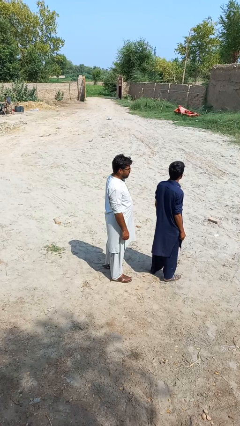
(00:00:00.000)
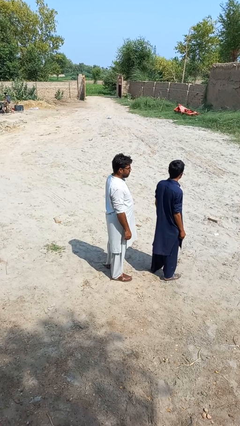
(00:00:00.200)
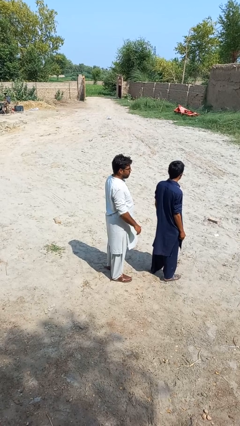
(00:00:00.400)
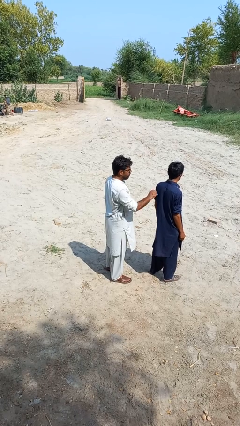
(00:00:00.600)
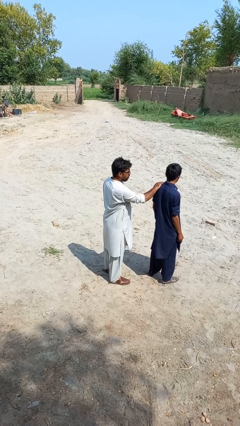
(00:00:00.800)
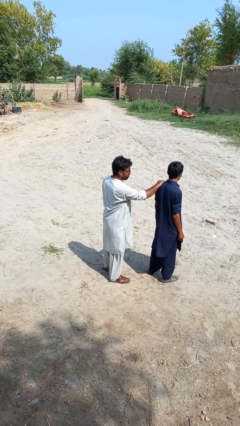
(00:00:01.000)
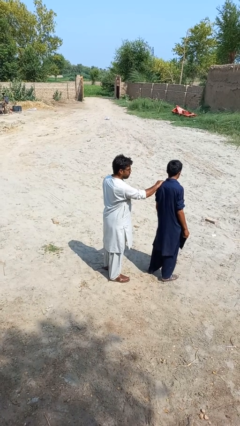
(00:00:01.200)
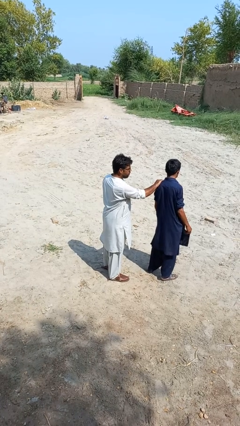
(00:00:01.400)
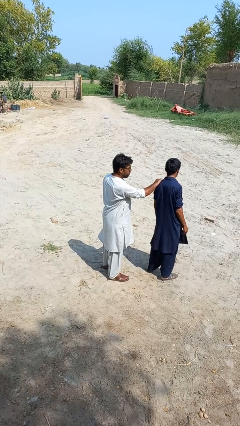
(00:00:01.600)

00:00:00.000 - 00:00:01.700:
person grabs person by shoulder

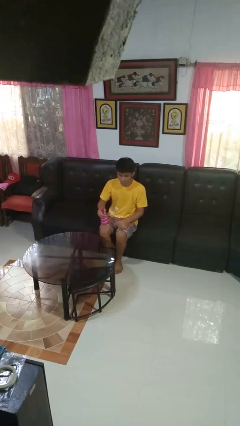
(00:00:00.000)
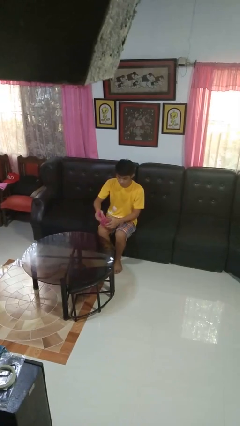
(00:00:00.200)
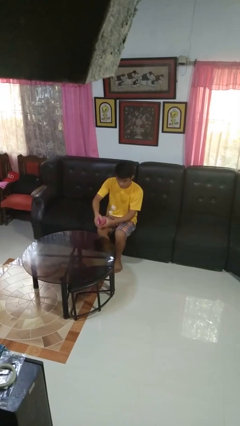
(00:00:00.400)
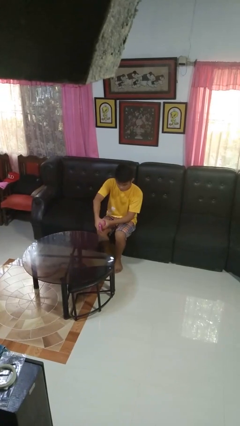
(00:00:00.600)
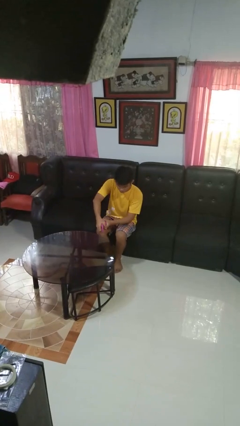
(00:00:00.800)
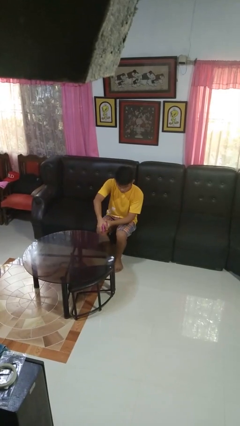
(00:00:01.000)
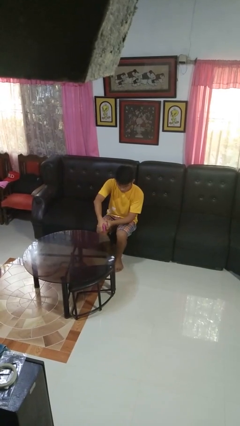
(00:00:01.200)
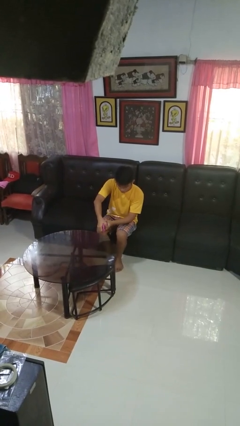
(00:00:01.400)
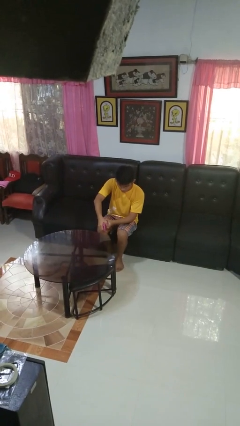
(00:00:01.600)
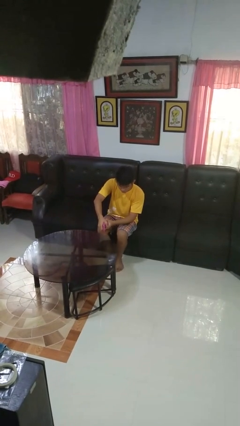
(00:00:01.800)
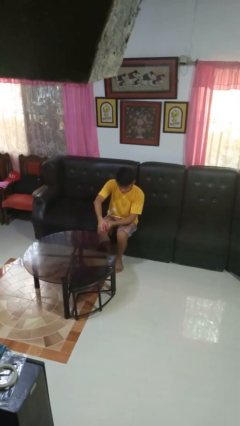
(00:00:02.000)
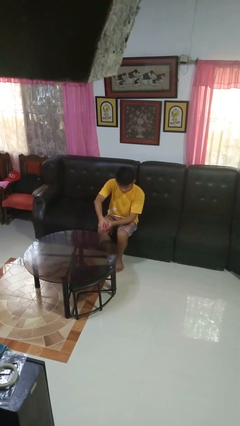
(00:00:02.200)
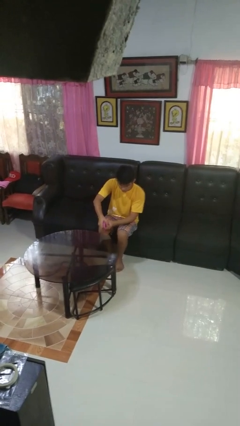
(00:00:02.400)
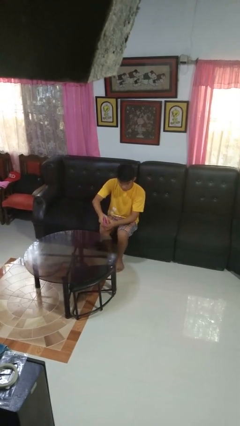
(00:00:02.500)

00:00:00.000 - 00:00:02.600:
person sprays from bottle

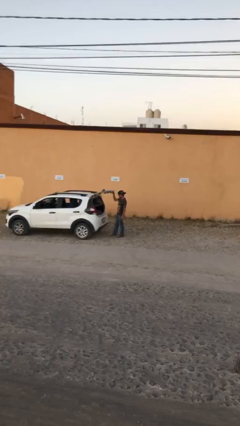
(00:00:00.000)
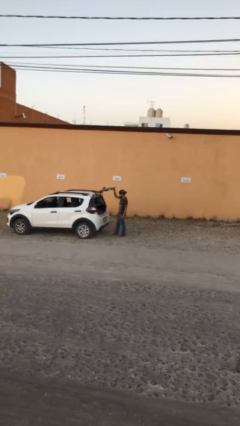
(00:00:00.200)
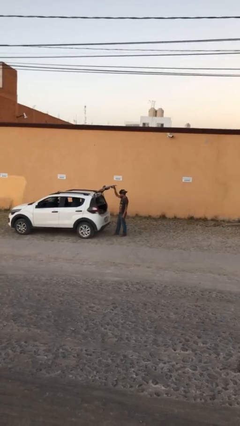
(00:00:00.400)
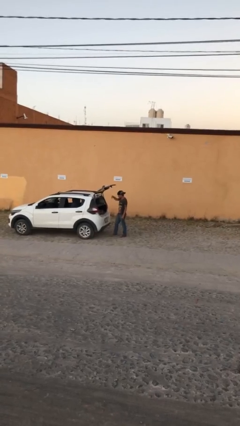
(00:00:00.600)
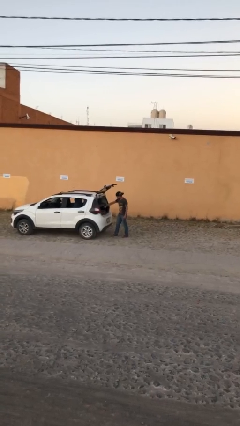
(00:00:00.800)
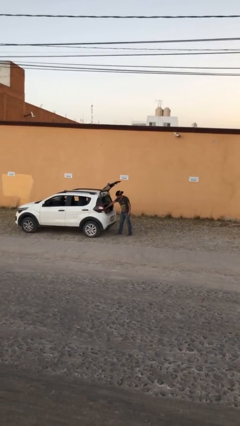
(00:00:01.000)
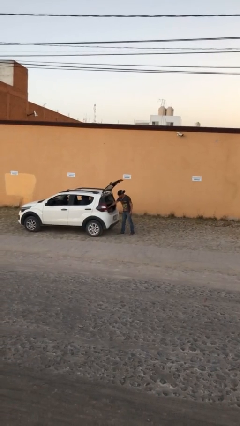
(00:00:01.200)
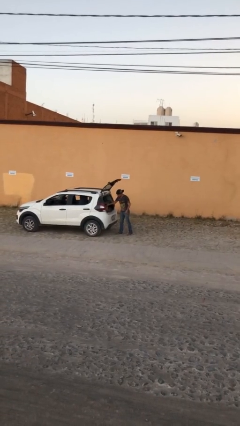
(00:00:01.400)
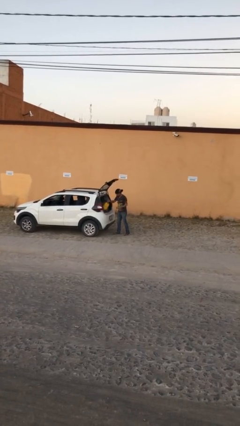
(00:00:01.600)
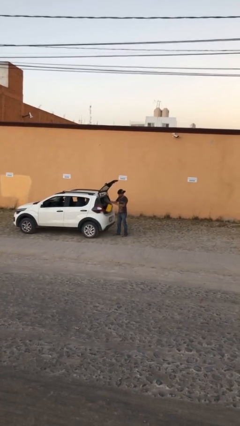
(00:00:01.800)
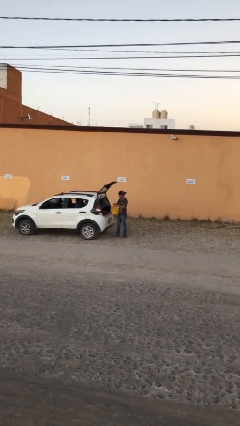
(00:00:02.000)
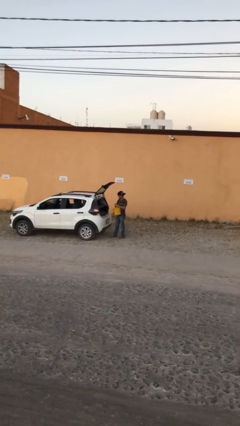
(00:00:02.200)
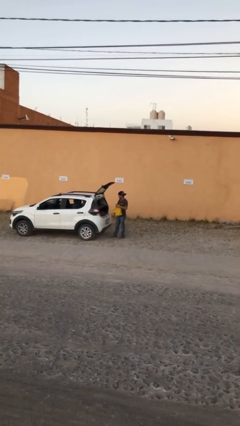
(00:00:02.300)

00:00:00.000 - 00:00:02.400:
person unloads car

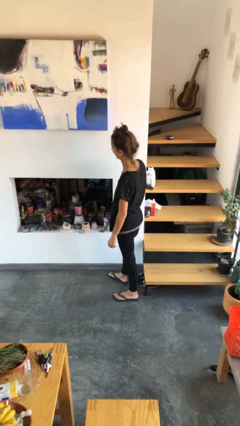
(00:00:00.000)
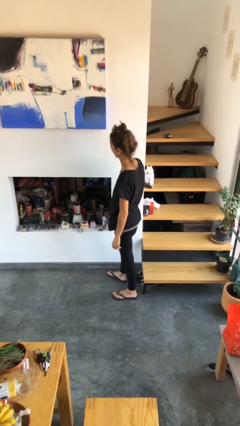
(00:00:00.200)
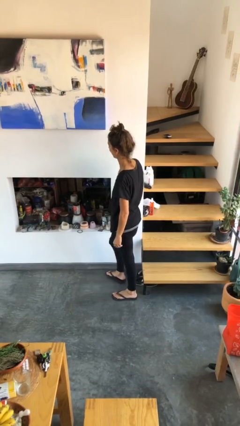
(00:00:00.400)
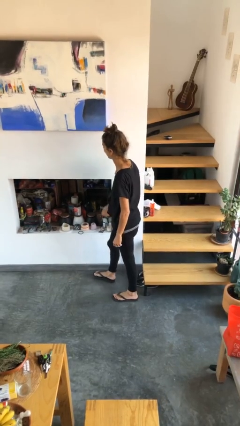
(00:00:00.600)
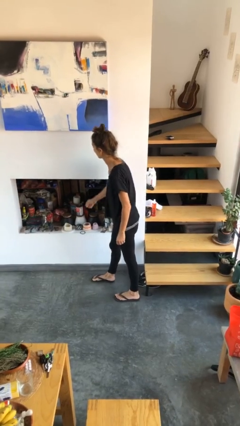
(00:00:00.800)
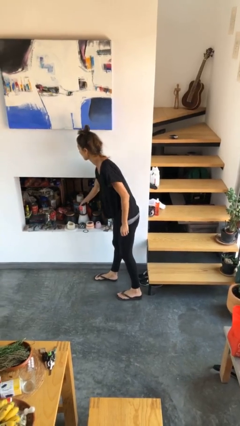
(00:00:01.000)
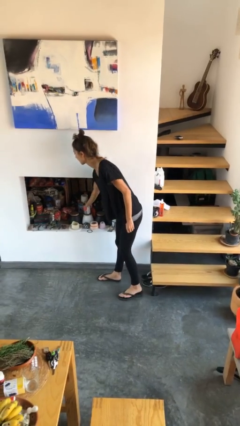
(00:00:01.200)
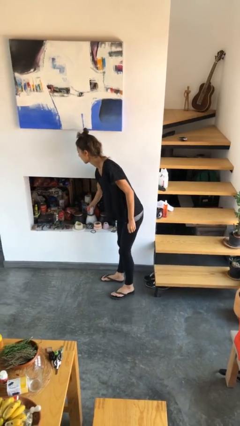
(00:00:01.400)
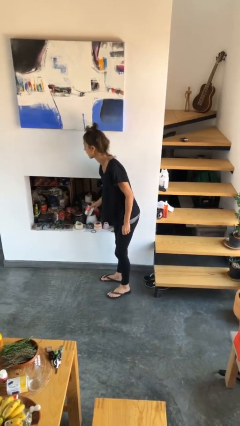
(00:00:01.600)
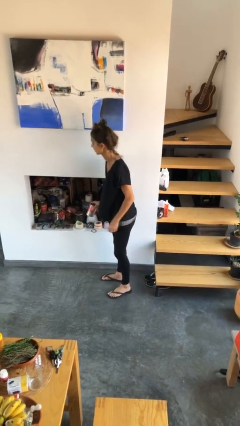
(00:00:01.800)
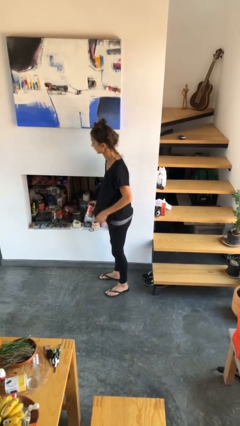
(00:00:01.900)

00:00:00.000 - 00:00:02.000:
person picks up object from cabinet

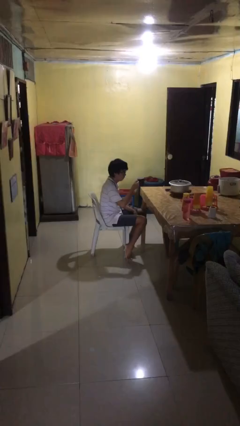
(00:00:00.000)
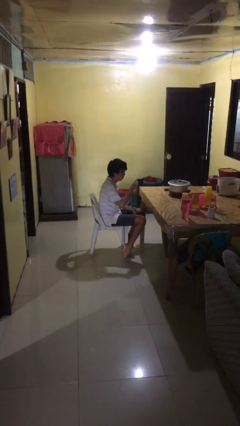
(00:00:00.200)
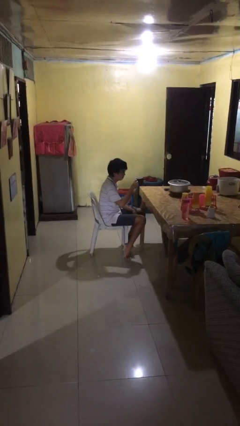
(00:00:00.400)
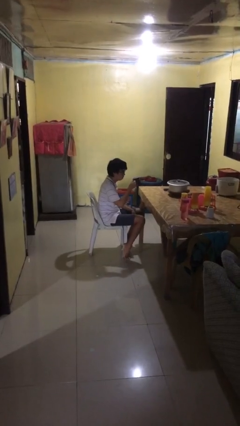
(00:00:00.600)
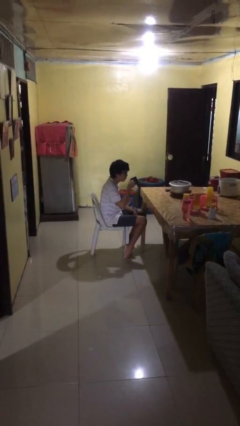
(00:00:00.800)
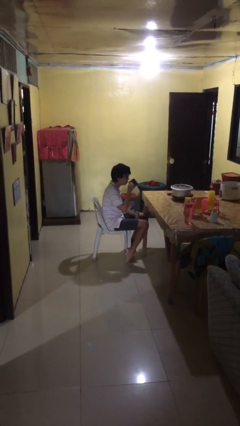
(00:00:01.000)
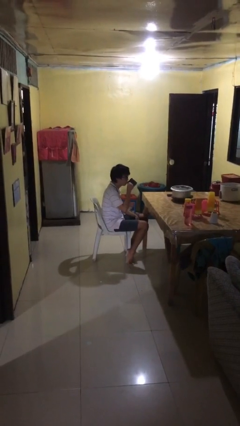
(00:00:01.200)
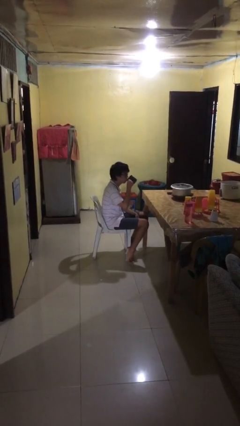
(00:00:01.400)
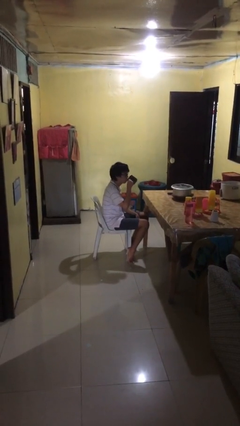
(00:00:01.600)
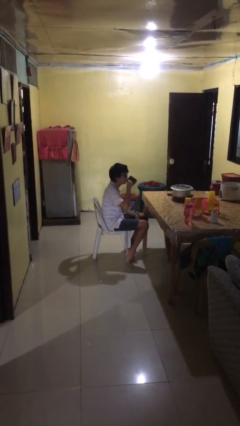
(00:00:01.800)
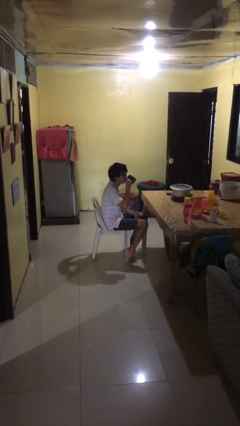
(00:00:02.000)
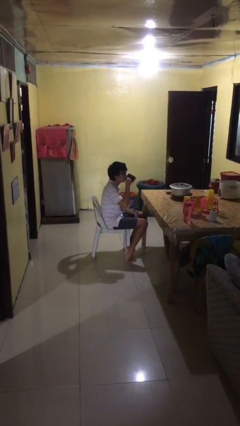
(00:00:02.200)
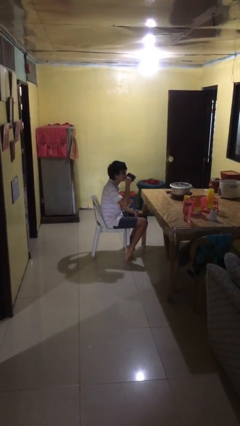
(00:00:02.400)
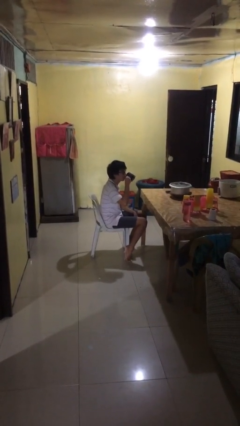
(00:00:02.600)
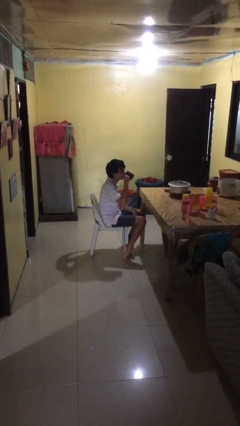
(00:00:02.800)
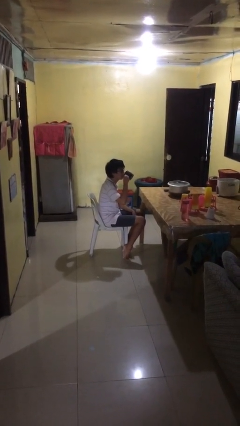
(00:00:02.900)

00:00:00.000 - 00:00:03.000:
person drinks from mug

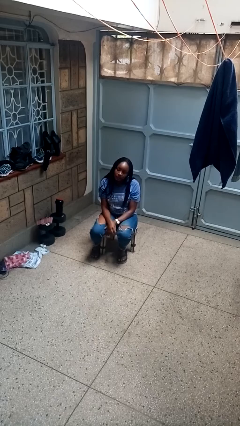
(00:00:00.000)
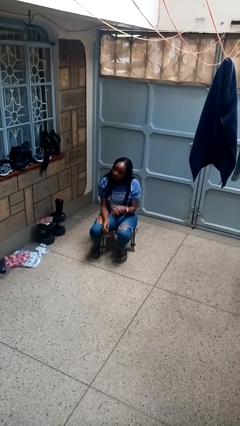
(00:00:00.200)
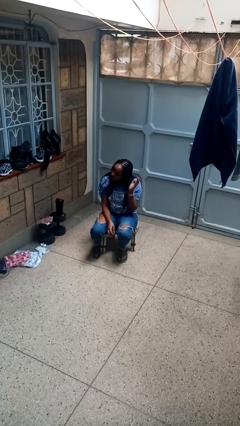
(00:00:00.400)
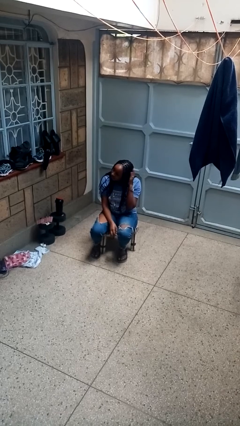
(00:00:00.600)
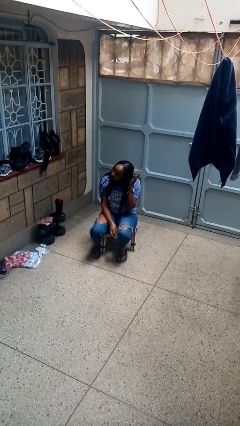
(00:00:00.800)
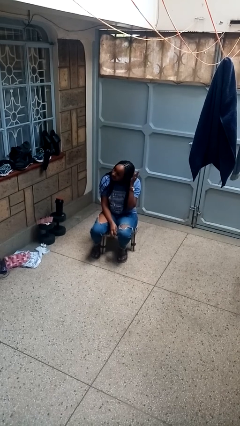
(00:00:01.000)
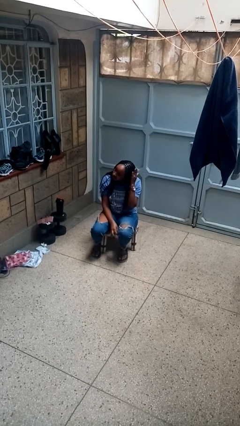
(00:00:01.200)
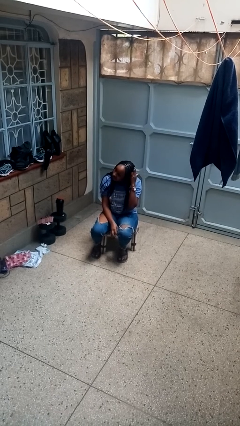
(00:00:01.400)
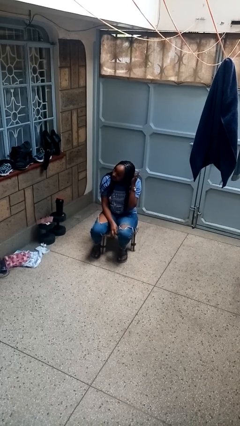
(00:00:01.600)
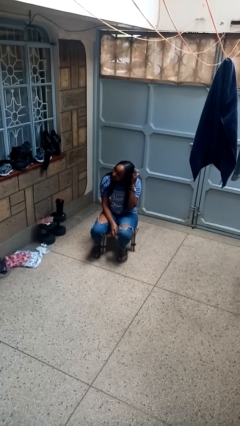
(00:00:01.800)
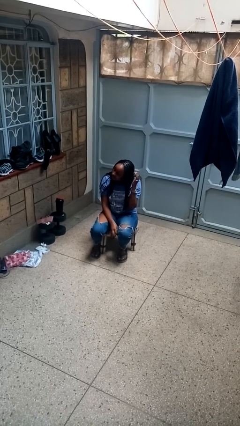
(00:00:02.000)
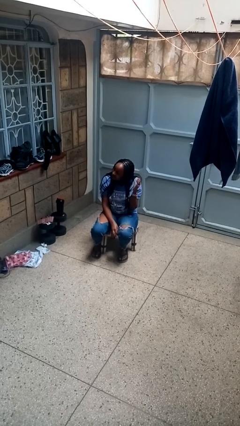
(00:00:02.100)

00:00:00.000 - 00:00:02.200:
person pats head

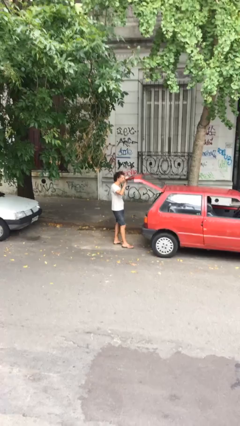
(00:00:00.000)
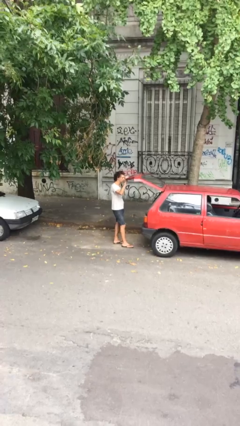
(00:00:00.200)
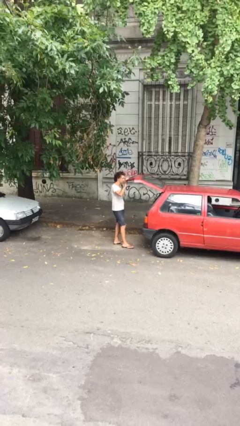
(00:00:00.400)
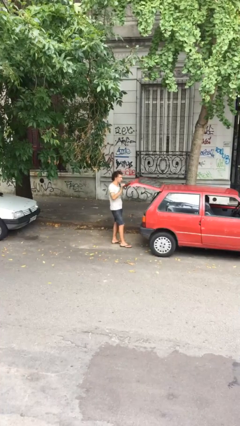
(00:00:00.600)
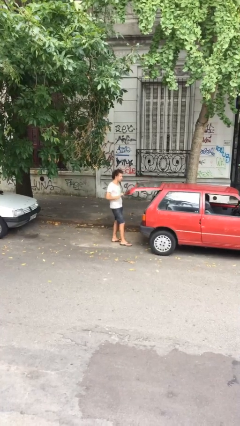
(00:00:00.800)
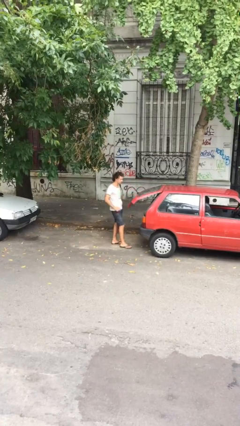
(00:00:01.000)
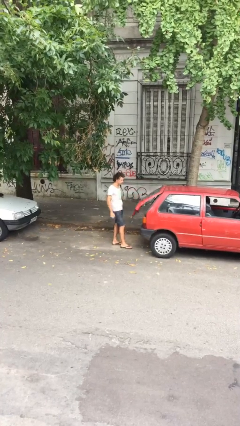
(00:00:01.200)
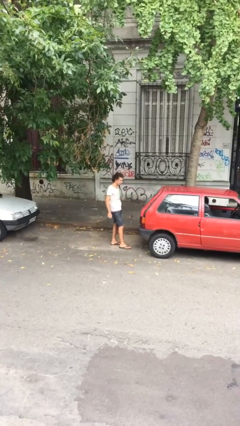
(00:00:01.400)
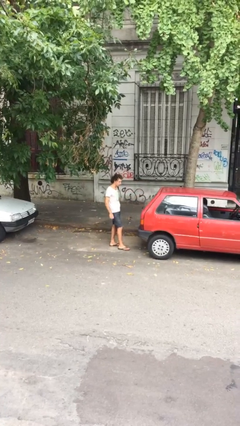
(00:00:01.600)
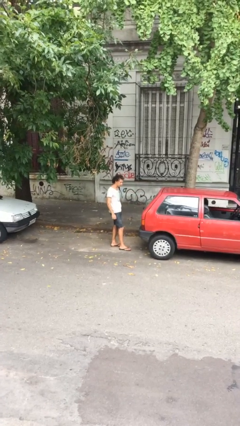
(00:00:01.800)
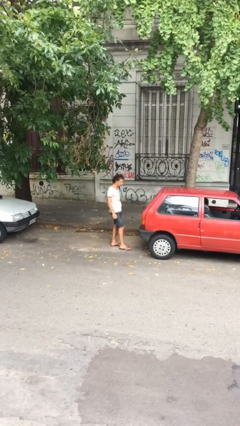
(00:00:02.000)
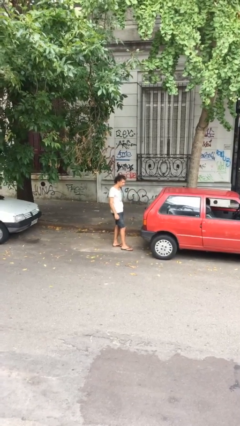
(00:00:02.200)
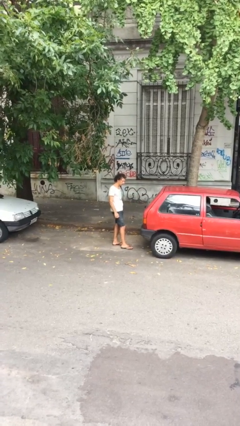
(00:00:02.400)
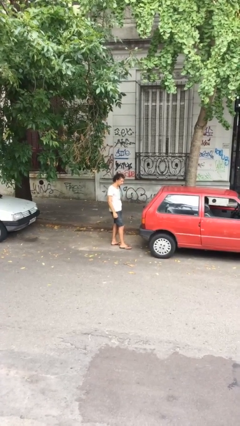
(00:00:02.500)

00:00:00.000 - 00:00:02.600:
person closes car trunk

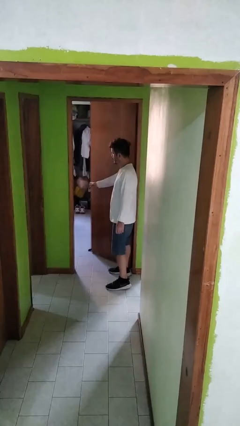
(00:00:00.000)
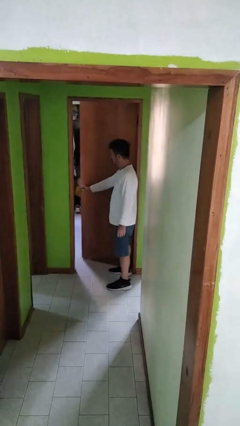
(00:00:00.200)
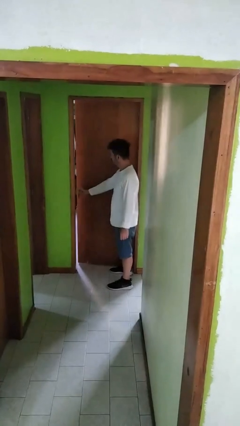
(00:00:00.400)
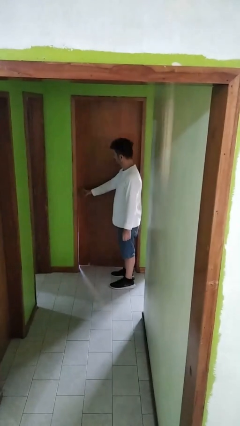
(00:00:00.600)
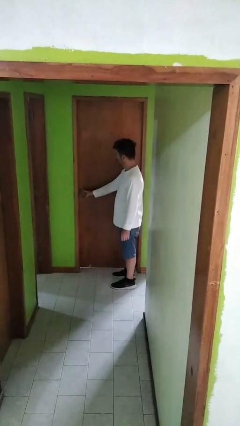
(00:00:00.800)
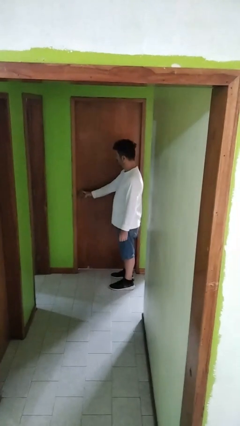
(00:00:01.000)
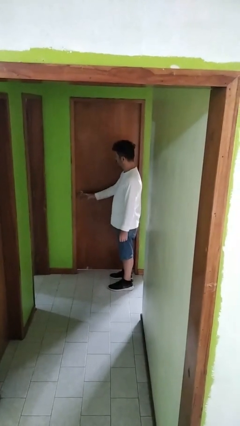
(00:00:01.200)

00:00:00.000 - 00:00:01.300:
person closes facility door
